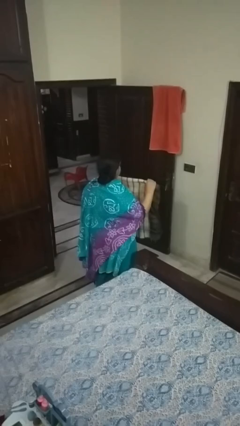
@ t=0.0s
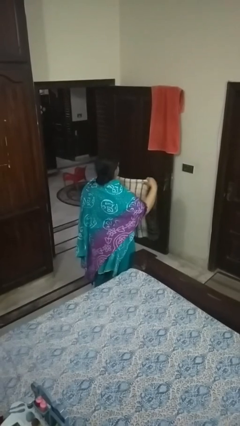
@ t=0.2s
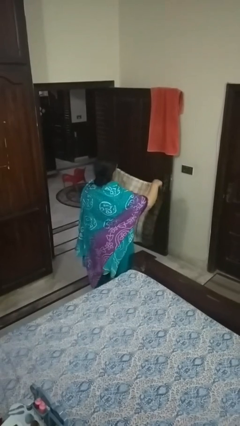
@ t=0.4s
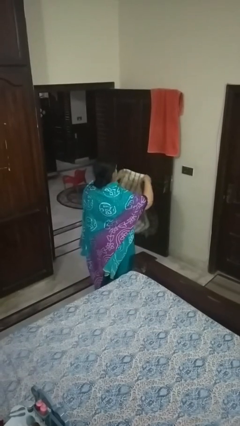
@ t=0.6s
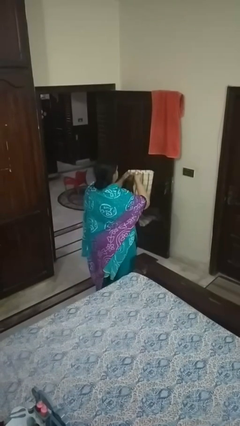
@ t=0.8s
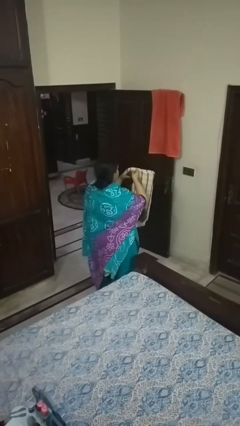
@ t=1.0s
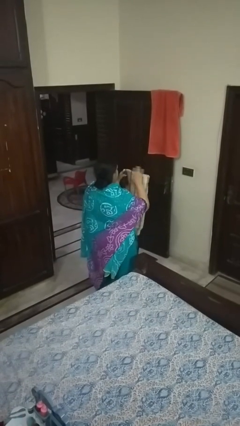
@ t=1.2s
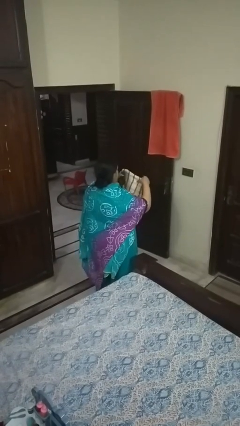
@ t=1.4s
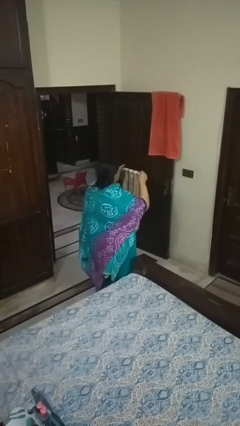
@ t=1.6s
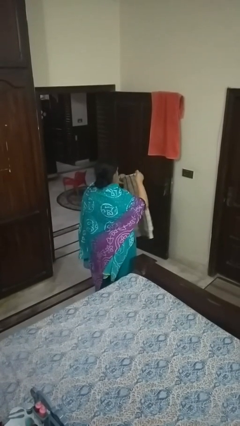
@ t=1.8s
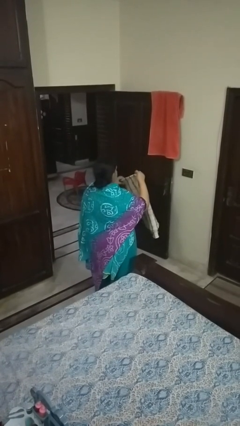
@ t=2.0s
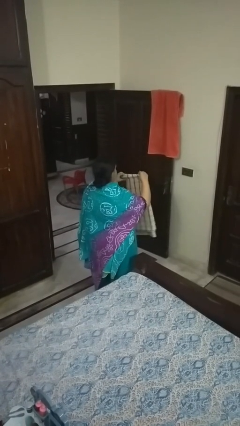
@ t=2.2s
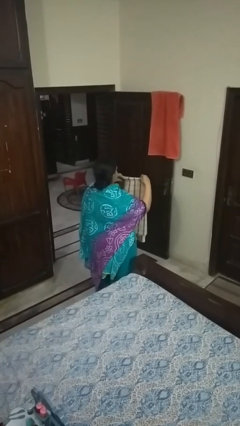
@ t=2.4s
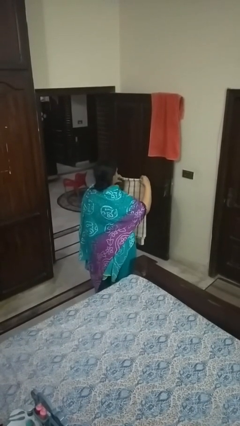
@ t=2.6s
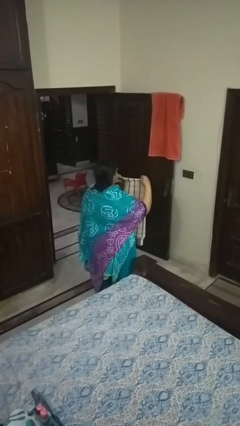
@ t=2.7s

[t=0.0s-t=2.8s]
person folds blanket

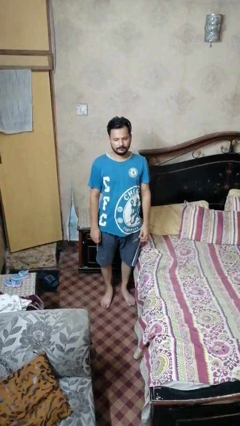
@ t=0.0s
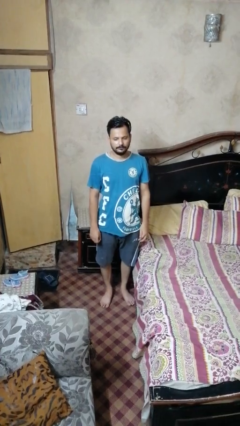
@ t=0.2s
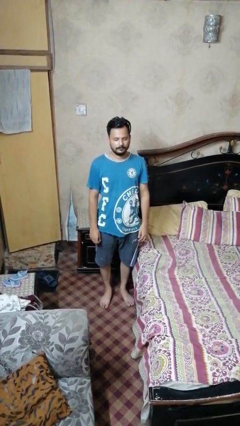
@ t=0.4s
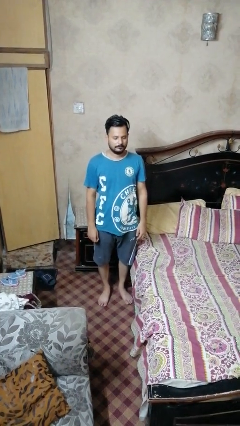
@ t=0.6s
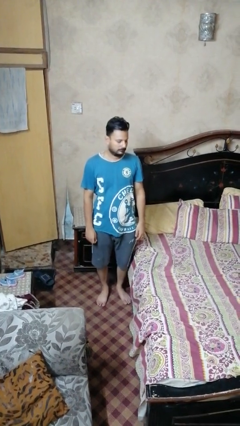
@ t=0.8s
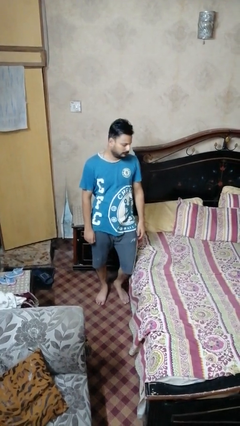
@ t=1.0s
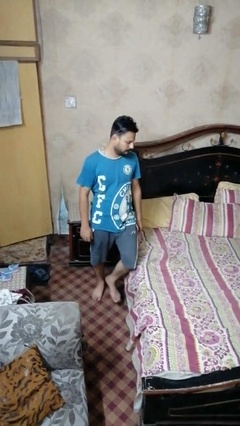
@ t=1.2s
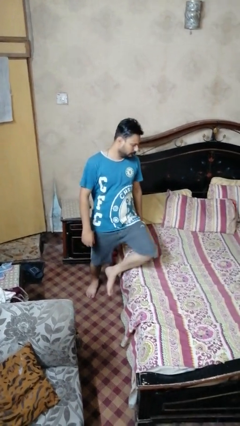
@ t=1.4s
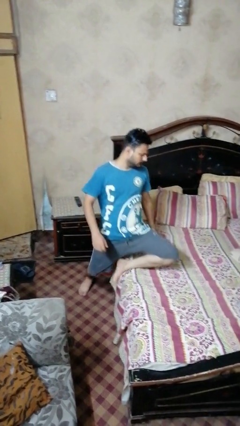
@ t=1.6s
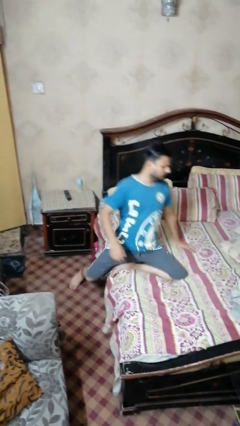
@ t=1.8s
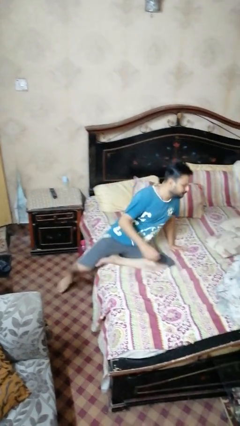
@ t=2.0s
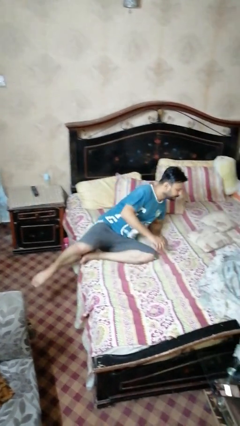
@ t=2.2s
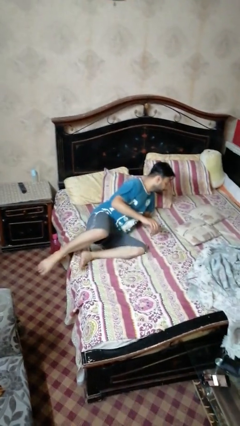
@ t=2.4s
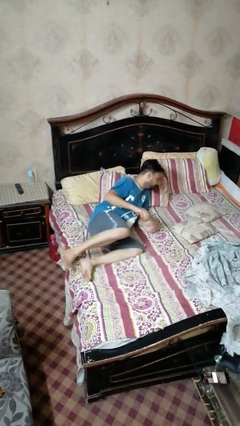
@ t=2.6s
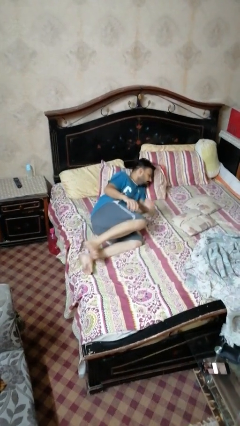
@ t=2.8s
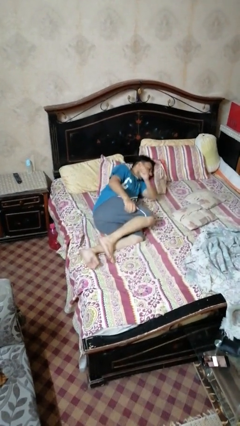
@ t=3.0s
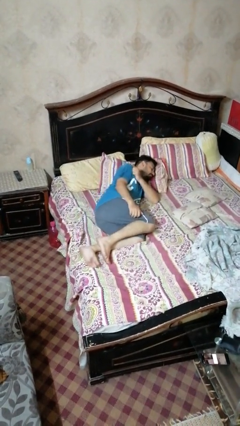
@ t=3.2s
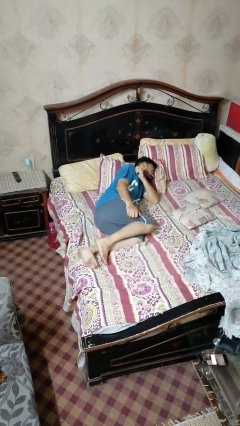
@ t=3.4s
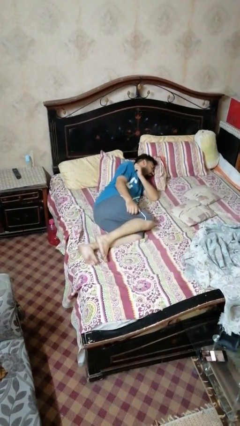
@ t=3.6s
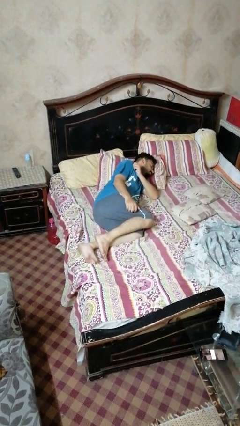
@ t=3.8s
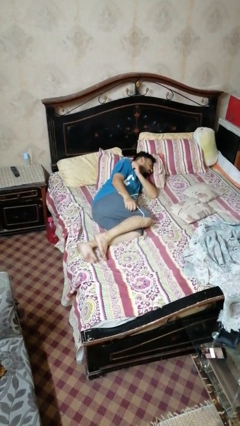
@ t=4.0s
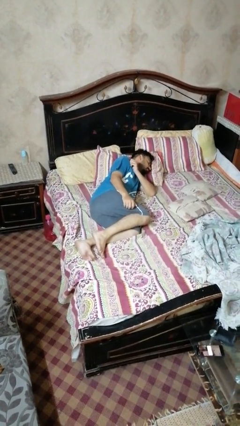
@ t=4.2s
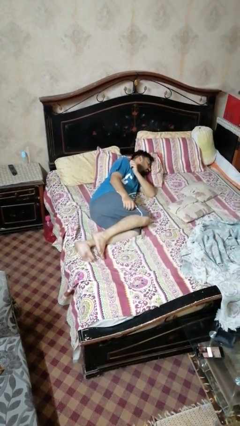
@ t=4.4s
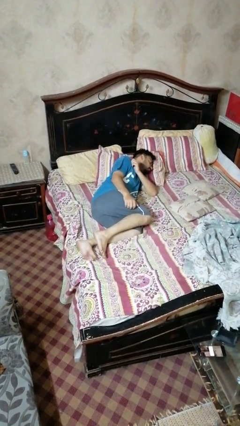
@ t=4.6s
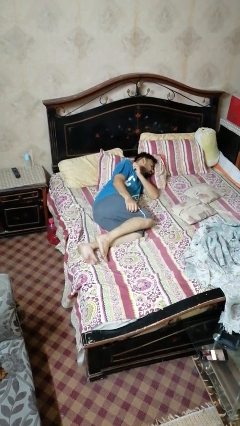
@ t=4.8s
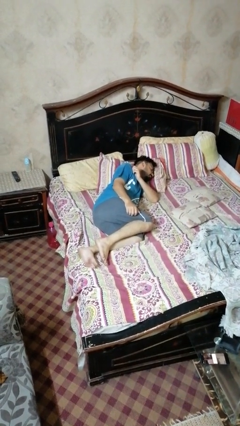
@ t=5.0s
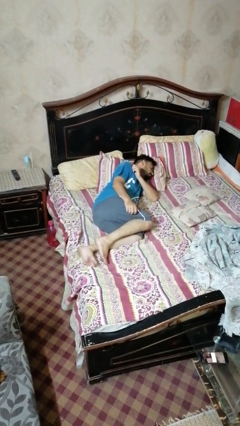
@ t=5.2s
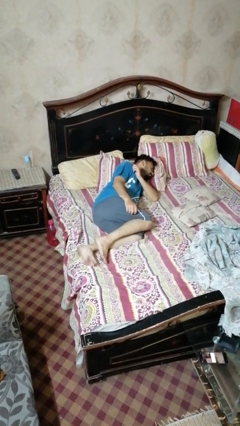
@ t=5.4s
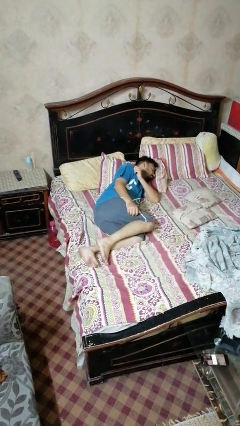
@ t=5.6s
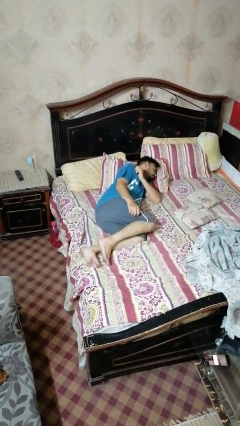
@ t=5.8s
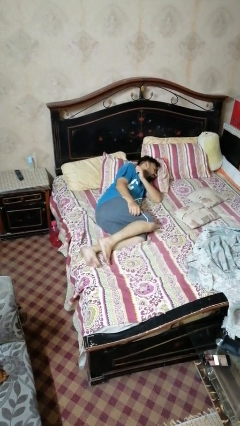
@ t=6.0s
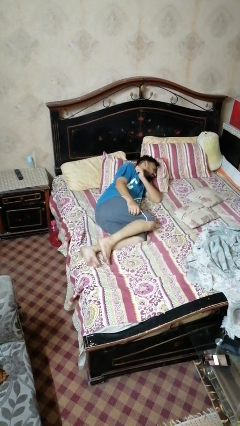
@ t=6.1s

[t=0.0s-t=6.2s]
person lies down on bed

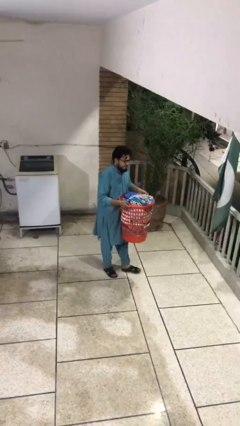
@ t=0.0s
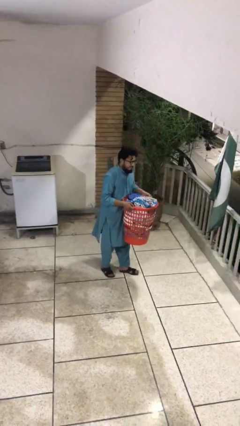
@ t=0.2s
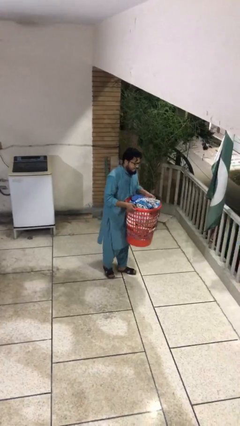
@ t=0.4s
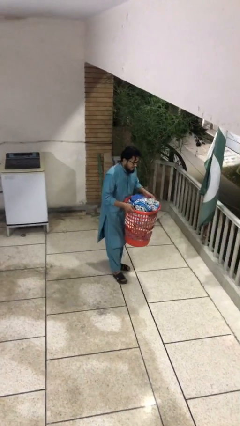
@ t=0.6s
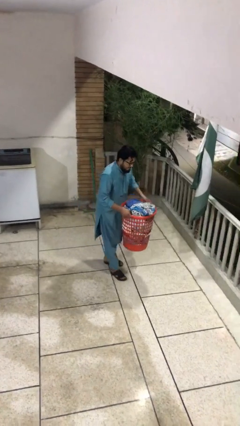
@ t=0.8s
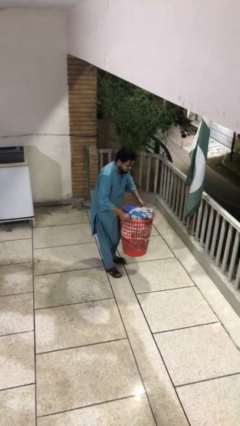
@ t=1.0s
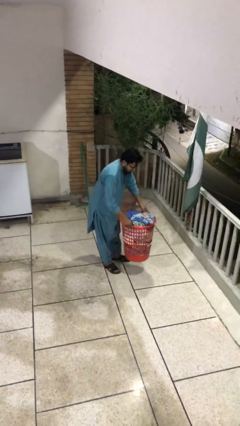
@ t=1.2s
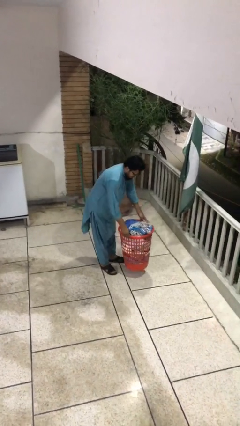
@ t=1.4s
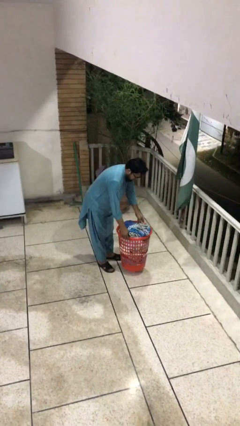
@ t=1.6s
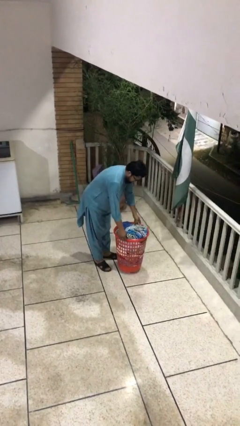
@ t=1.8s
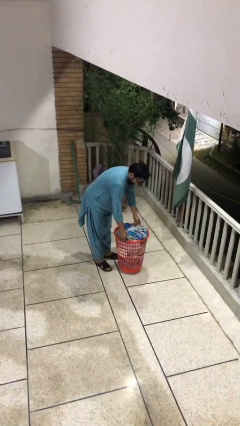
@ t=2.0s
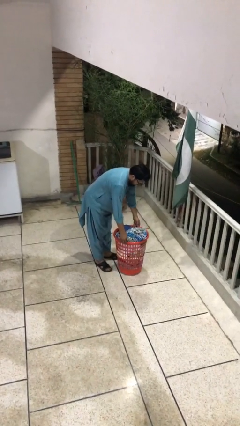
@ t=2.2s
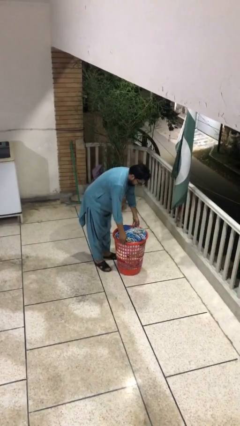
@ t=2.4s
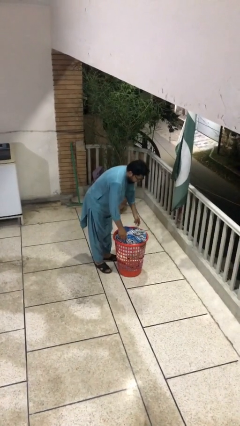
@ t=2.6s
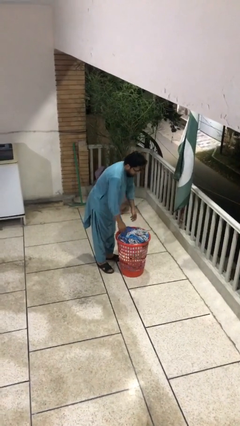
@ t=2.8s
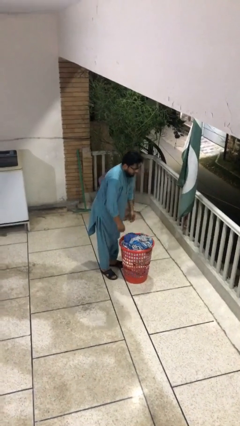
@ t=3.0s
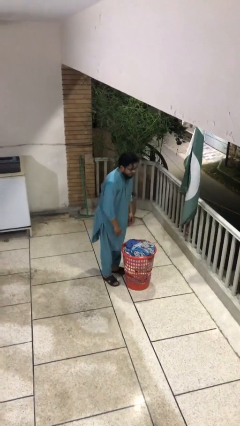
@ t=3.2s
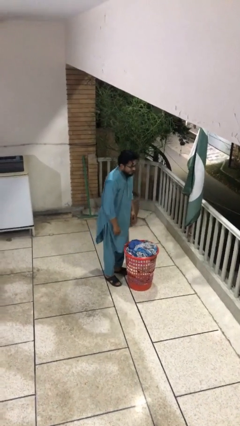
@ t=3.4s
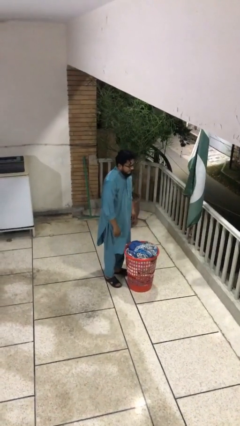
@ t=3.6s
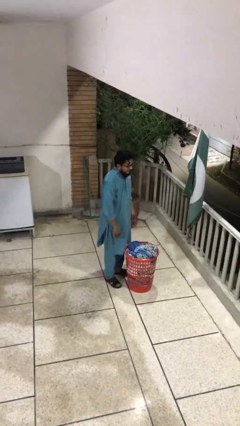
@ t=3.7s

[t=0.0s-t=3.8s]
person puts down object on floor

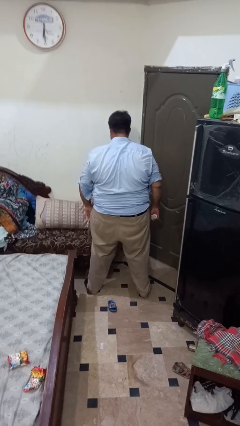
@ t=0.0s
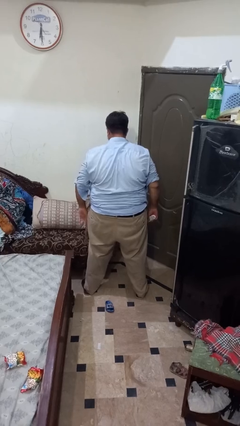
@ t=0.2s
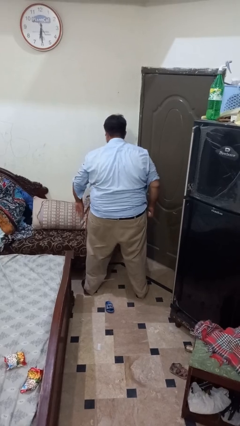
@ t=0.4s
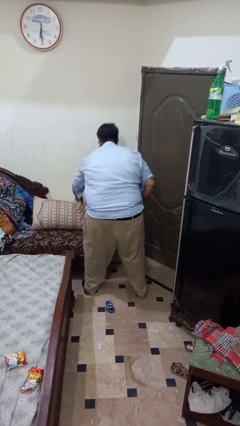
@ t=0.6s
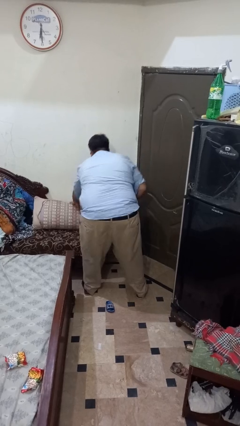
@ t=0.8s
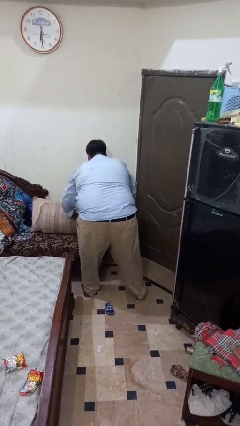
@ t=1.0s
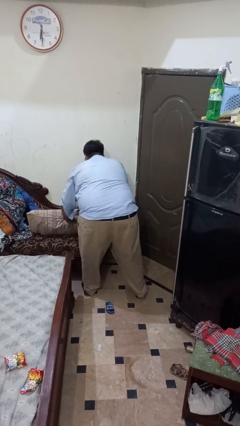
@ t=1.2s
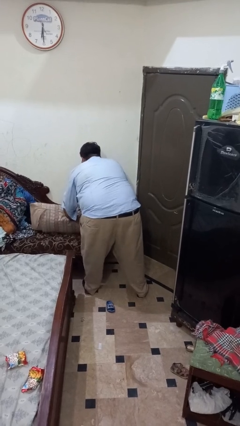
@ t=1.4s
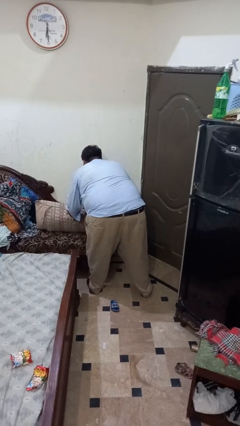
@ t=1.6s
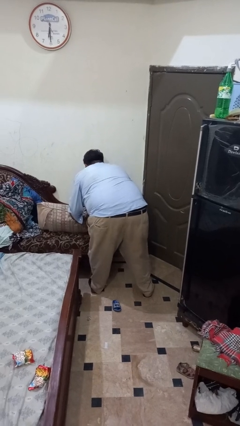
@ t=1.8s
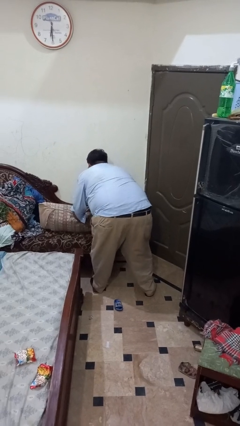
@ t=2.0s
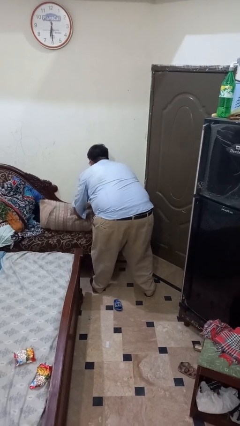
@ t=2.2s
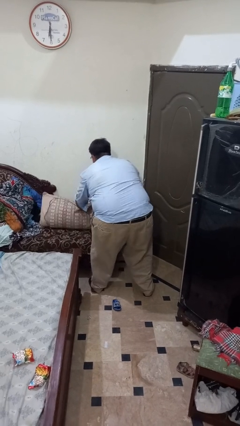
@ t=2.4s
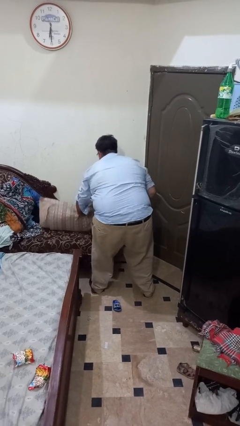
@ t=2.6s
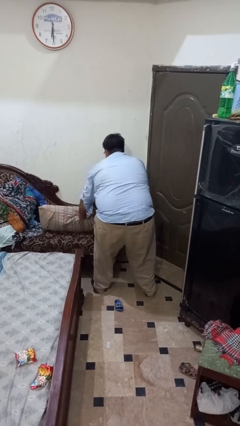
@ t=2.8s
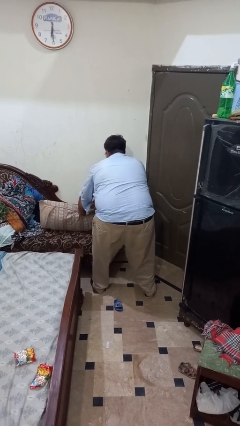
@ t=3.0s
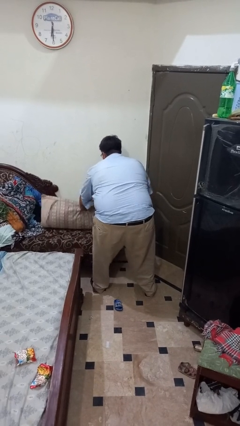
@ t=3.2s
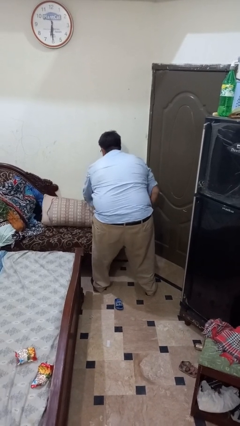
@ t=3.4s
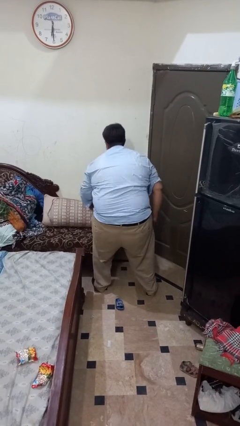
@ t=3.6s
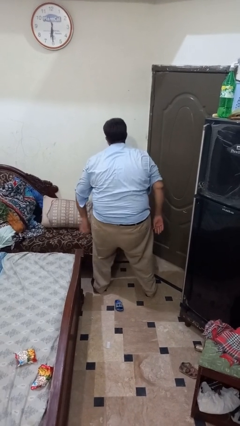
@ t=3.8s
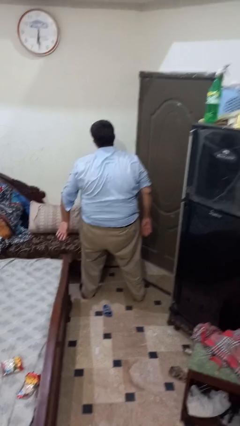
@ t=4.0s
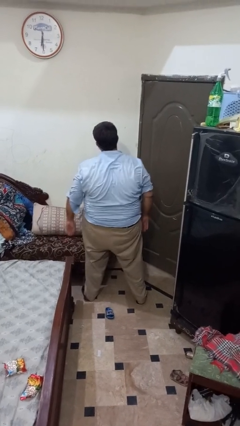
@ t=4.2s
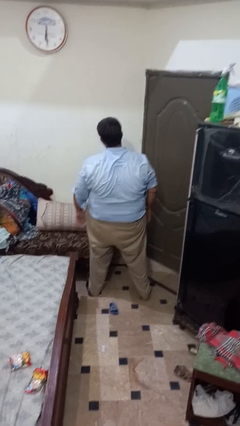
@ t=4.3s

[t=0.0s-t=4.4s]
person searches in couch

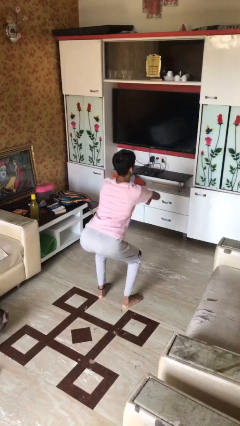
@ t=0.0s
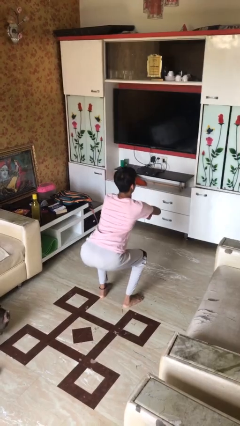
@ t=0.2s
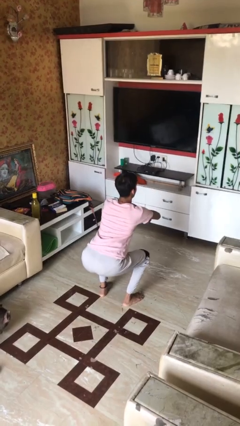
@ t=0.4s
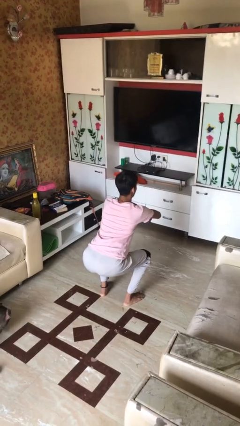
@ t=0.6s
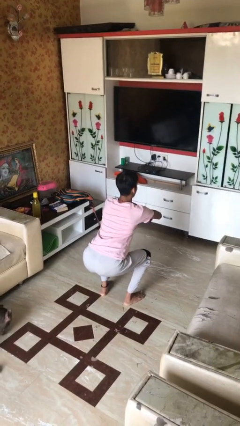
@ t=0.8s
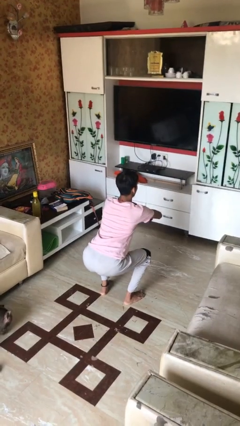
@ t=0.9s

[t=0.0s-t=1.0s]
person squats
